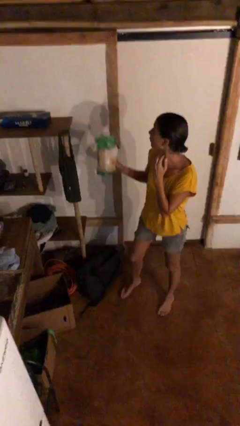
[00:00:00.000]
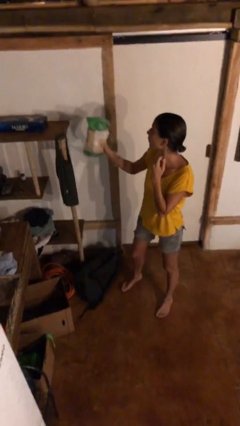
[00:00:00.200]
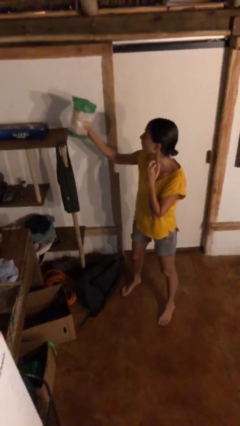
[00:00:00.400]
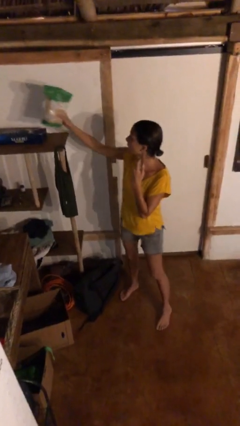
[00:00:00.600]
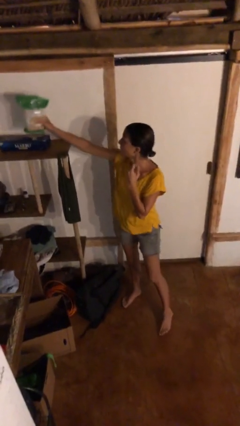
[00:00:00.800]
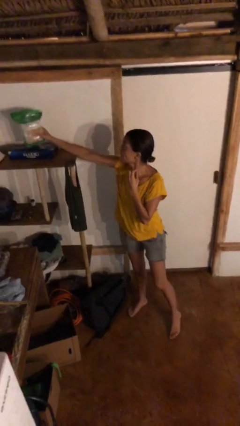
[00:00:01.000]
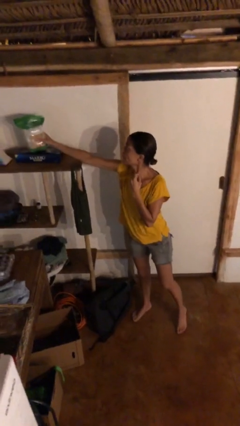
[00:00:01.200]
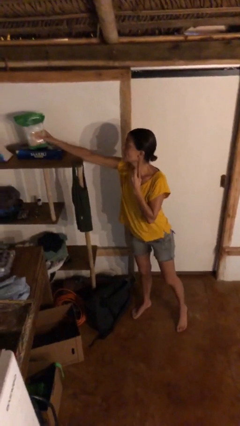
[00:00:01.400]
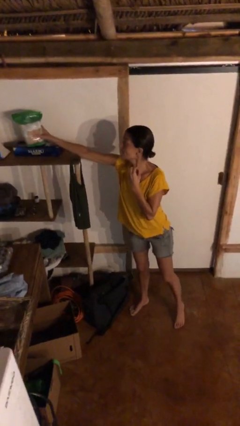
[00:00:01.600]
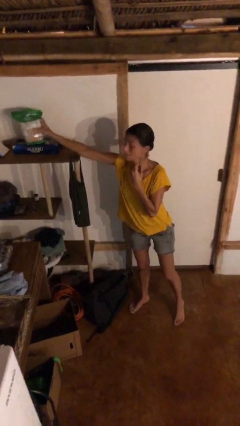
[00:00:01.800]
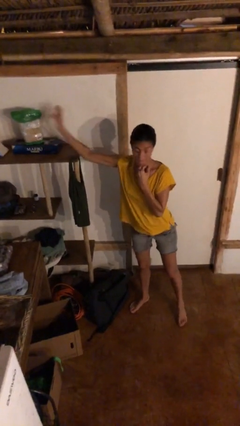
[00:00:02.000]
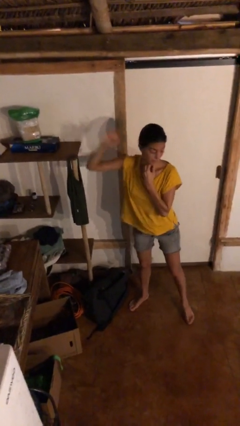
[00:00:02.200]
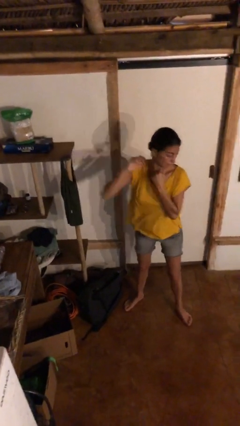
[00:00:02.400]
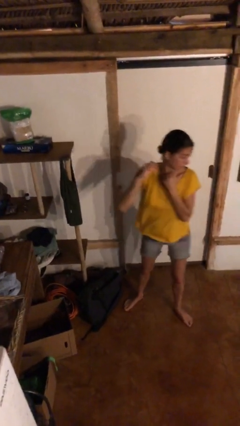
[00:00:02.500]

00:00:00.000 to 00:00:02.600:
person puts down object on shelf

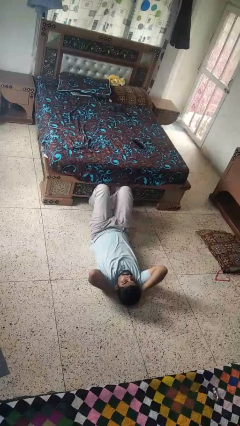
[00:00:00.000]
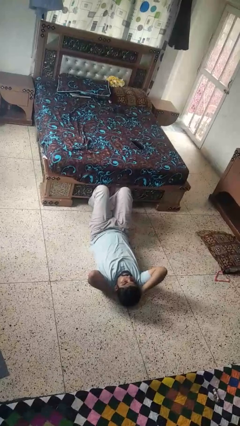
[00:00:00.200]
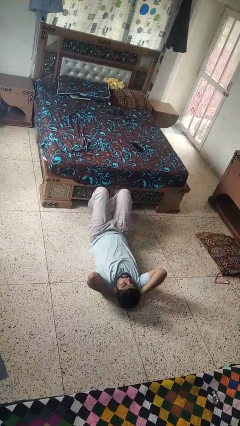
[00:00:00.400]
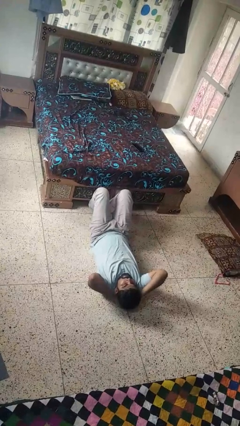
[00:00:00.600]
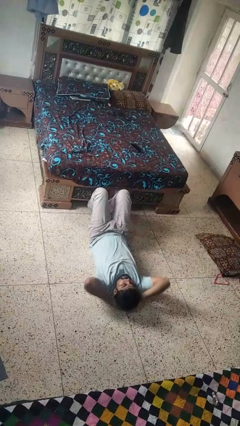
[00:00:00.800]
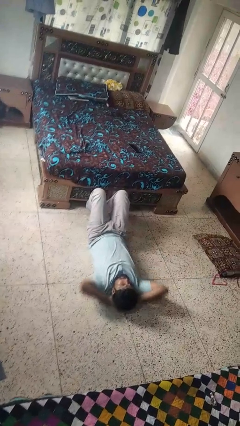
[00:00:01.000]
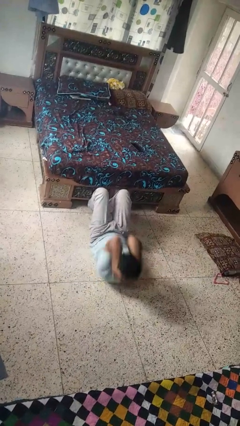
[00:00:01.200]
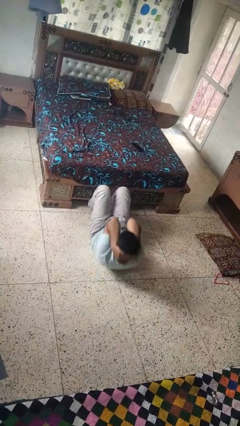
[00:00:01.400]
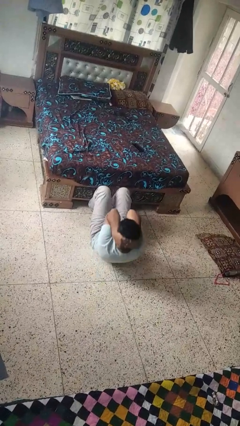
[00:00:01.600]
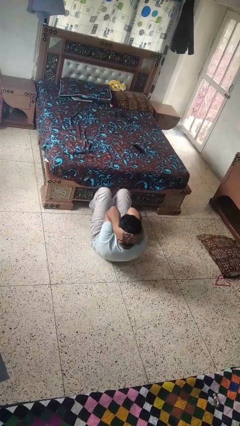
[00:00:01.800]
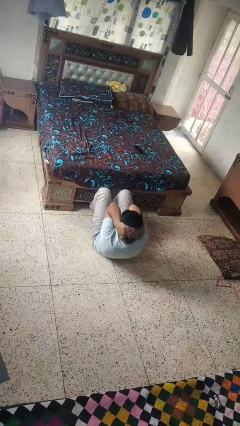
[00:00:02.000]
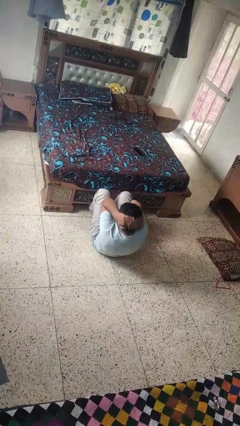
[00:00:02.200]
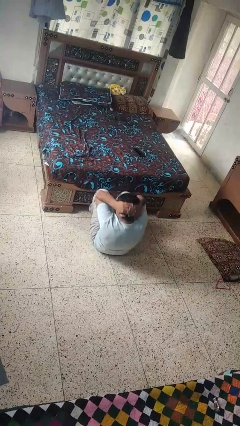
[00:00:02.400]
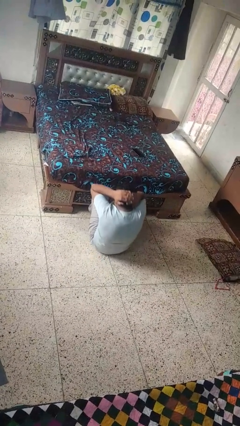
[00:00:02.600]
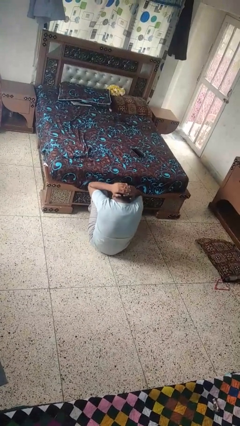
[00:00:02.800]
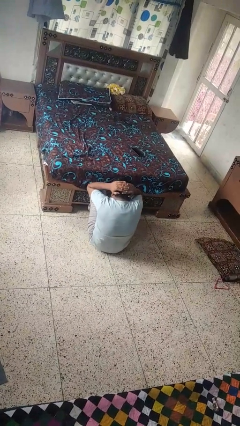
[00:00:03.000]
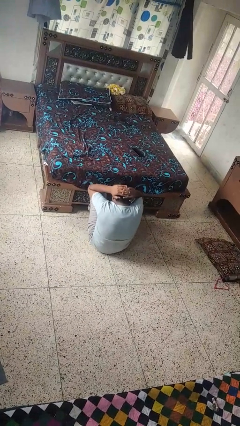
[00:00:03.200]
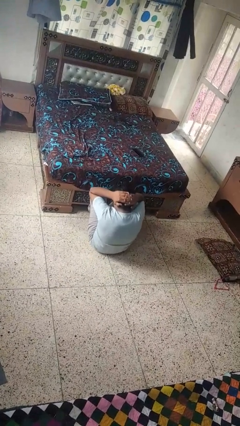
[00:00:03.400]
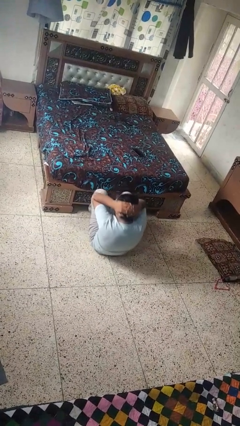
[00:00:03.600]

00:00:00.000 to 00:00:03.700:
person exercises with situp

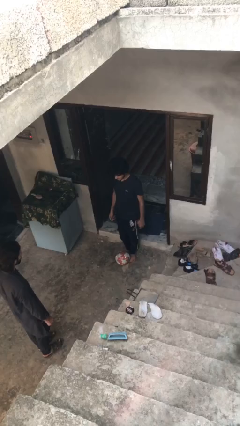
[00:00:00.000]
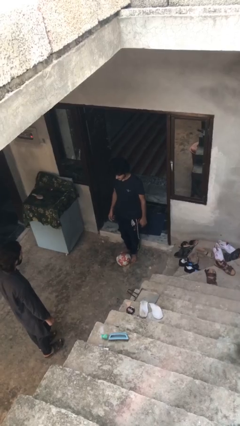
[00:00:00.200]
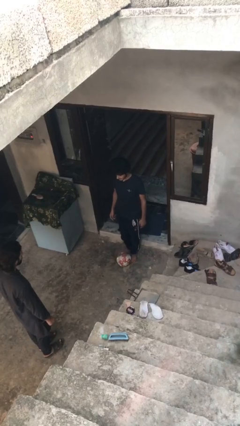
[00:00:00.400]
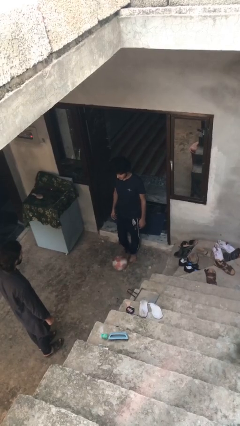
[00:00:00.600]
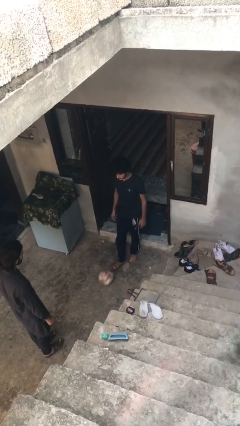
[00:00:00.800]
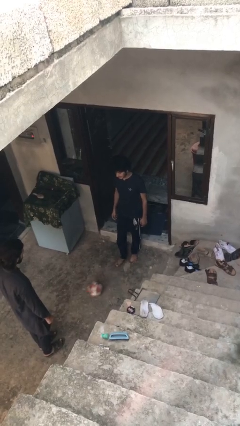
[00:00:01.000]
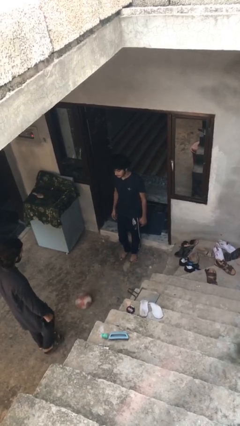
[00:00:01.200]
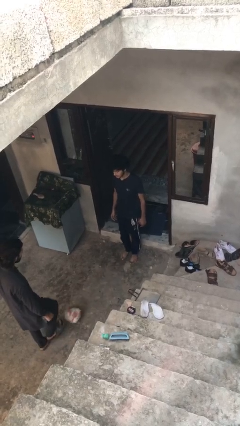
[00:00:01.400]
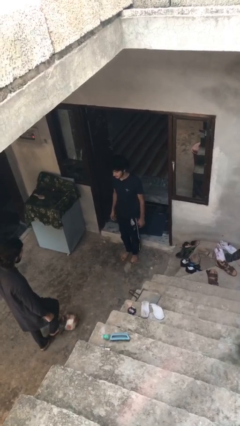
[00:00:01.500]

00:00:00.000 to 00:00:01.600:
person kicks object to person

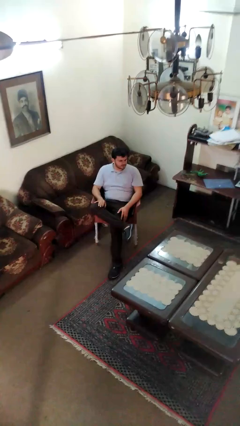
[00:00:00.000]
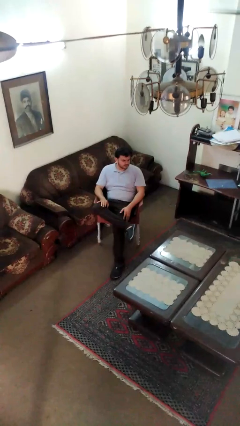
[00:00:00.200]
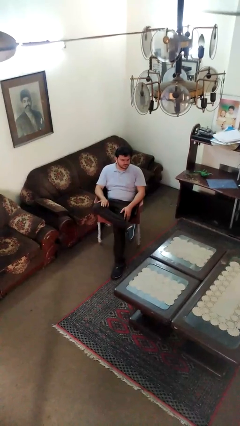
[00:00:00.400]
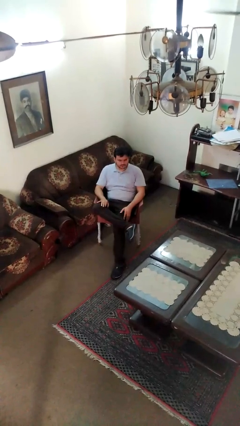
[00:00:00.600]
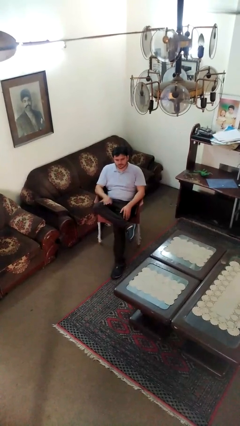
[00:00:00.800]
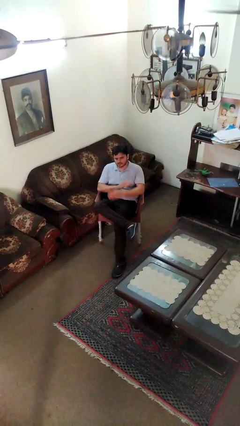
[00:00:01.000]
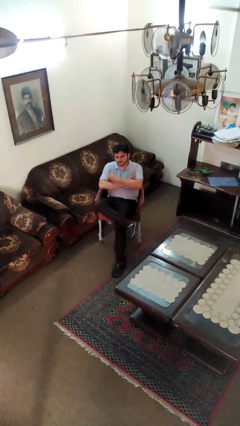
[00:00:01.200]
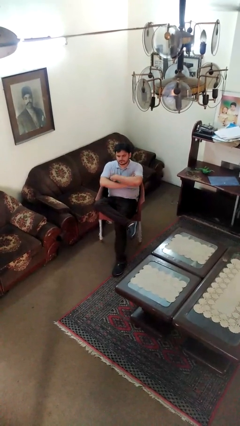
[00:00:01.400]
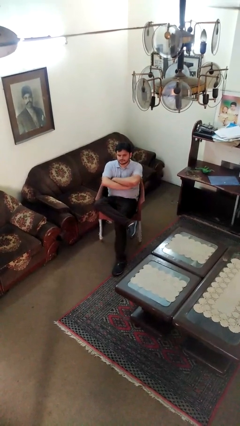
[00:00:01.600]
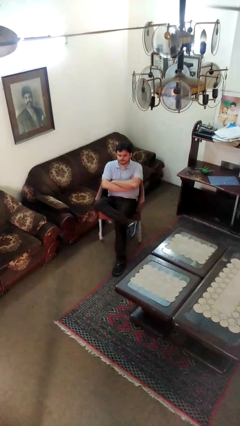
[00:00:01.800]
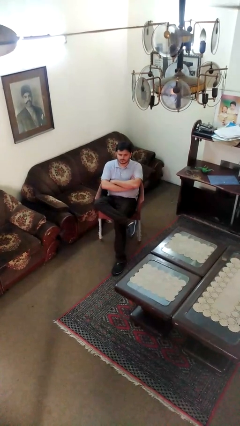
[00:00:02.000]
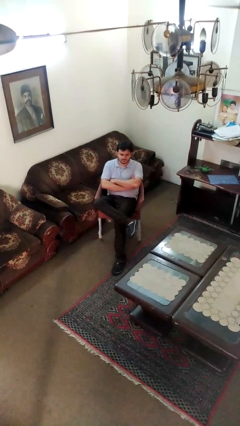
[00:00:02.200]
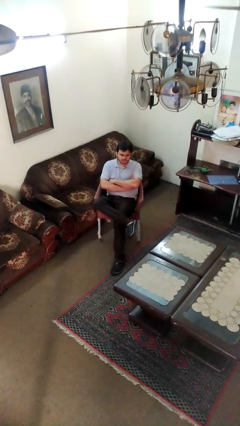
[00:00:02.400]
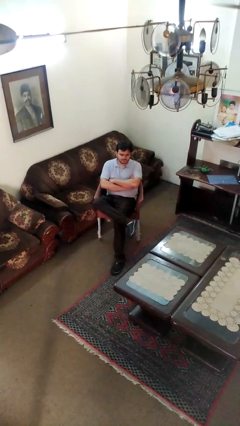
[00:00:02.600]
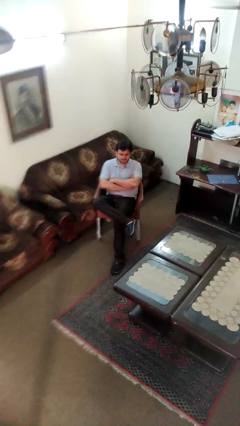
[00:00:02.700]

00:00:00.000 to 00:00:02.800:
person crosses arms

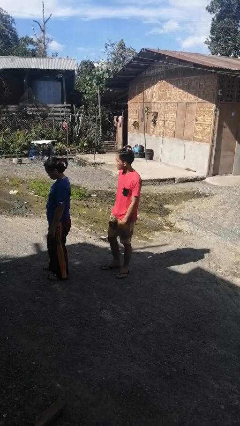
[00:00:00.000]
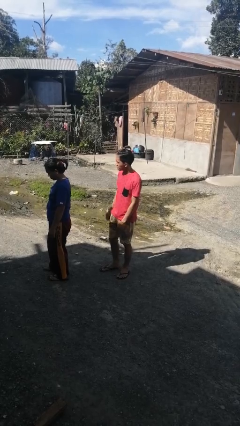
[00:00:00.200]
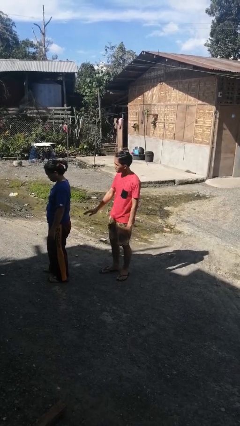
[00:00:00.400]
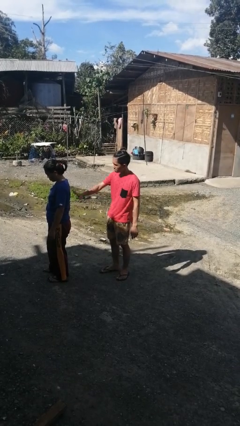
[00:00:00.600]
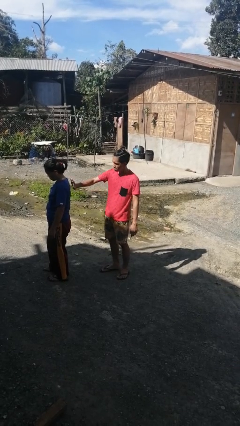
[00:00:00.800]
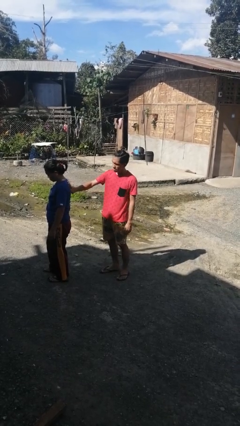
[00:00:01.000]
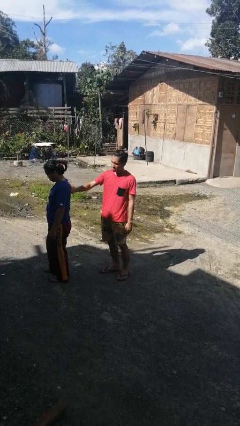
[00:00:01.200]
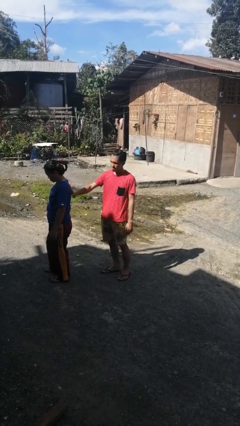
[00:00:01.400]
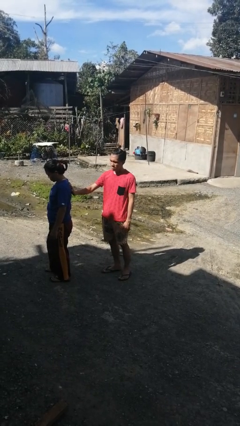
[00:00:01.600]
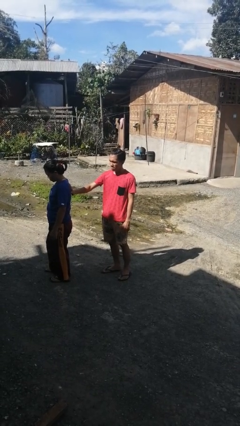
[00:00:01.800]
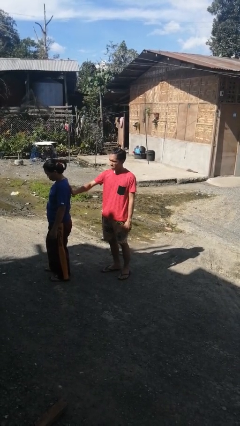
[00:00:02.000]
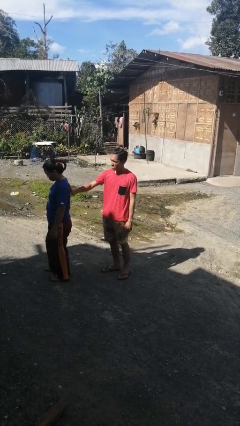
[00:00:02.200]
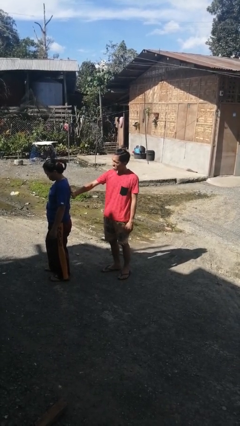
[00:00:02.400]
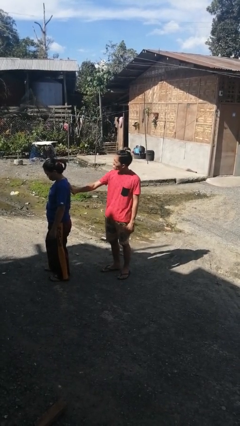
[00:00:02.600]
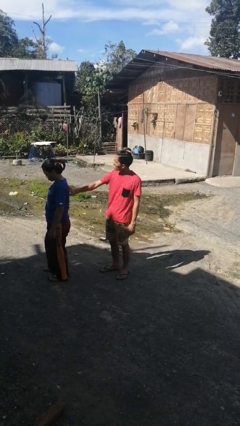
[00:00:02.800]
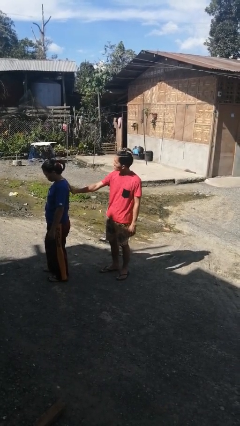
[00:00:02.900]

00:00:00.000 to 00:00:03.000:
person touches back of person

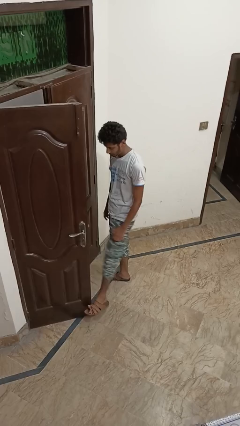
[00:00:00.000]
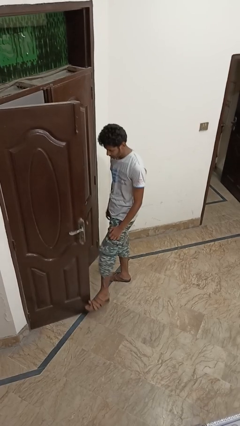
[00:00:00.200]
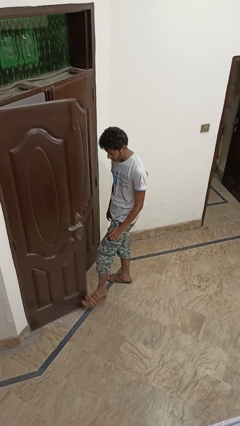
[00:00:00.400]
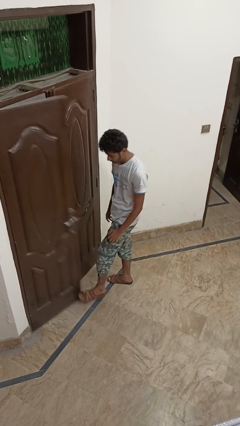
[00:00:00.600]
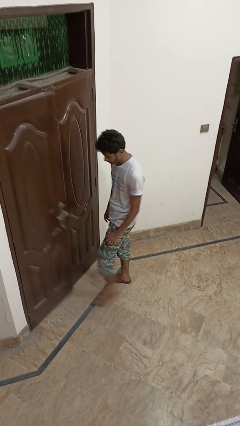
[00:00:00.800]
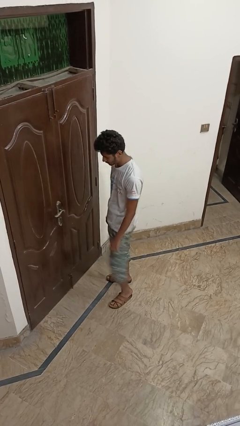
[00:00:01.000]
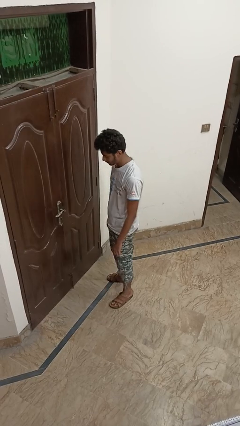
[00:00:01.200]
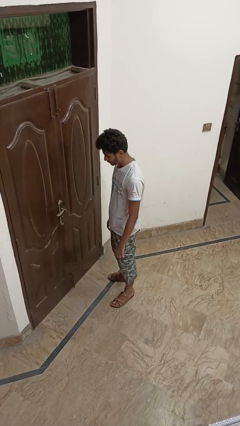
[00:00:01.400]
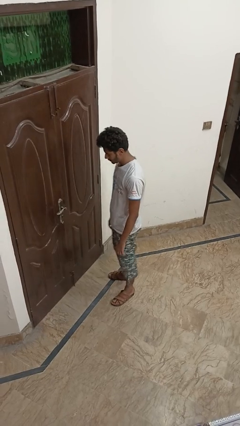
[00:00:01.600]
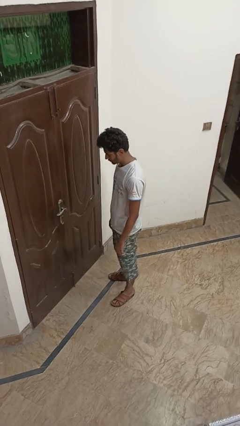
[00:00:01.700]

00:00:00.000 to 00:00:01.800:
person closes door with foot

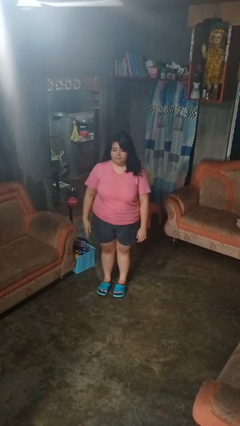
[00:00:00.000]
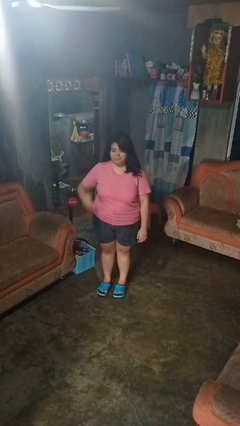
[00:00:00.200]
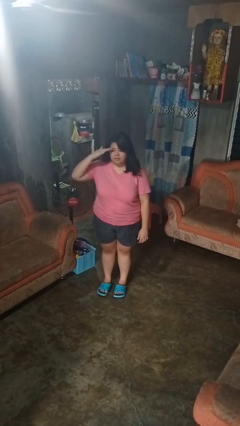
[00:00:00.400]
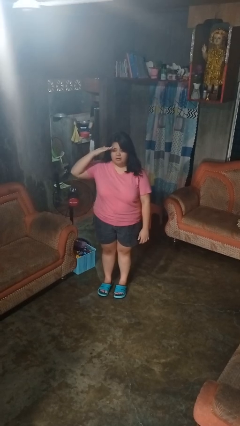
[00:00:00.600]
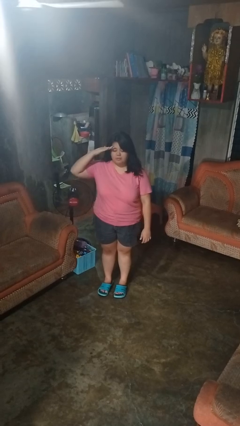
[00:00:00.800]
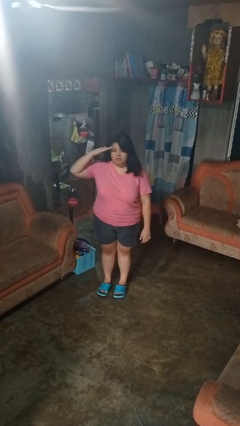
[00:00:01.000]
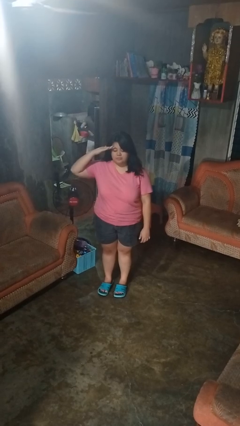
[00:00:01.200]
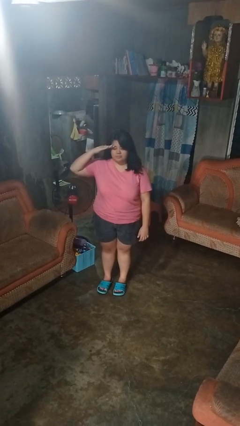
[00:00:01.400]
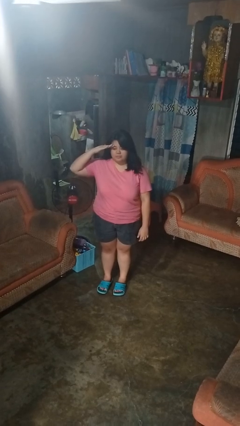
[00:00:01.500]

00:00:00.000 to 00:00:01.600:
person salutes
